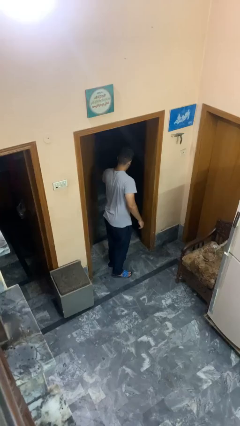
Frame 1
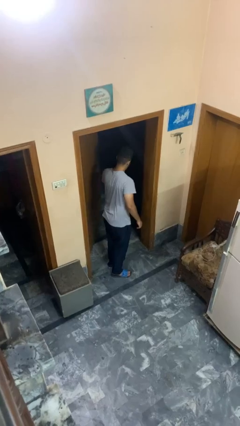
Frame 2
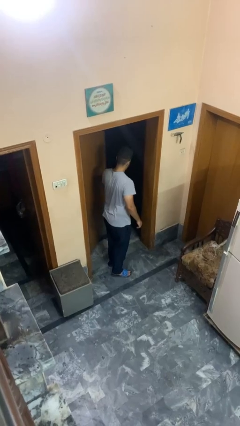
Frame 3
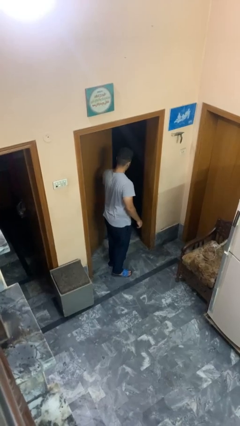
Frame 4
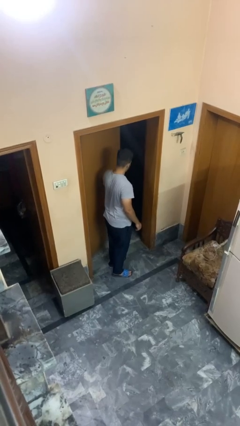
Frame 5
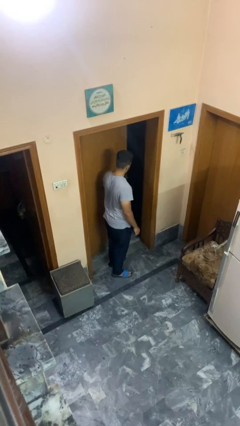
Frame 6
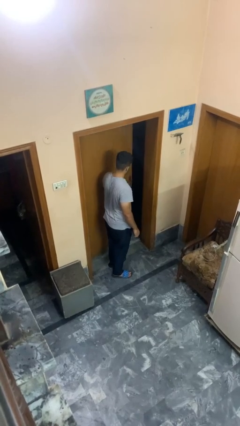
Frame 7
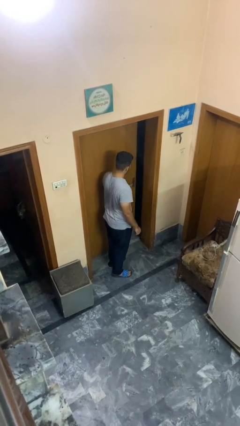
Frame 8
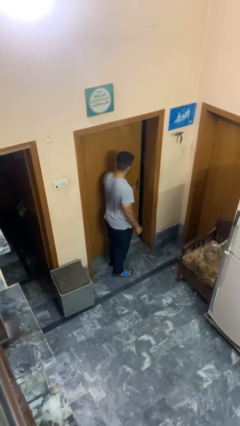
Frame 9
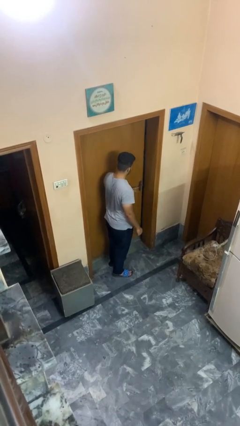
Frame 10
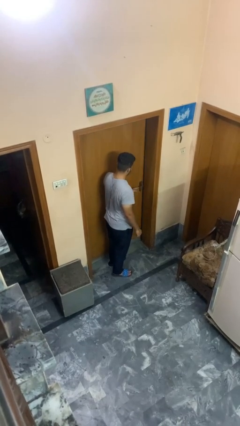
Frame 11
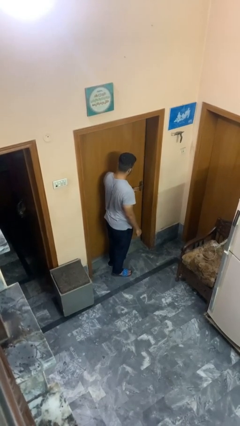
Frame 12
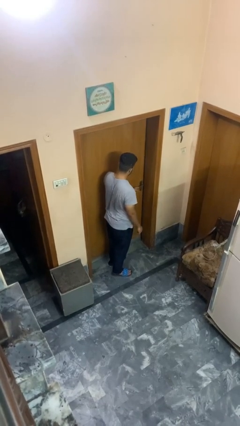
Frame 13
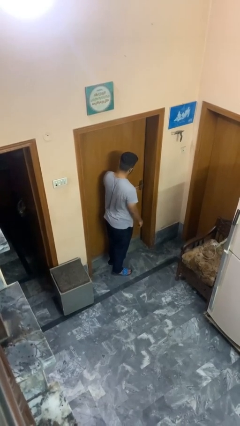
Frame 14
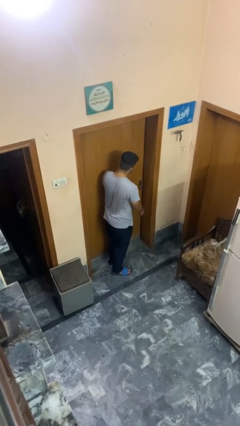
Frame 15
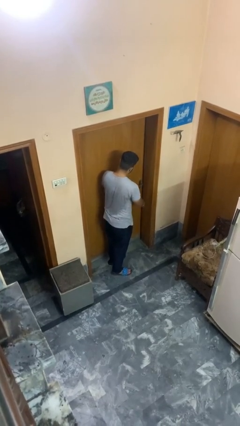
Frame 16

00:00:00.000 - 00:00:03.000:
person closes facility door

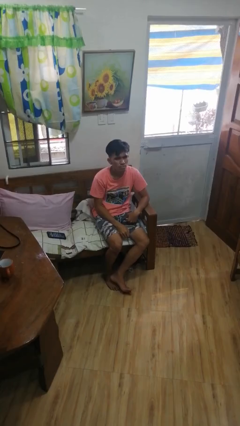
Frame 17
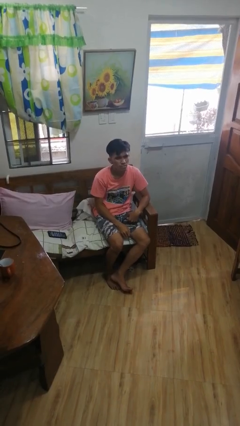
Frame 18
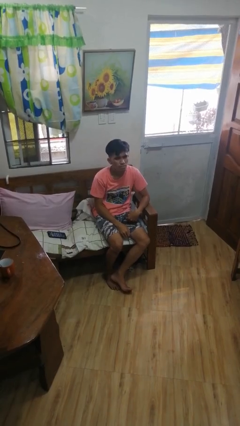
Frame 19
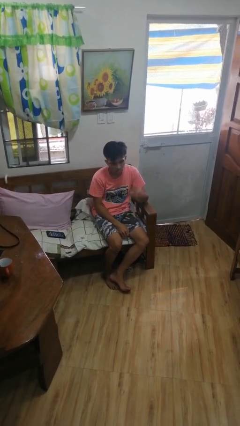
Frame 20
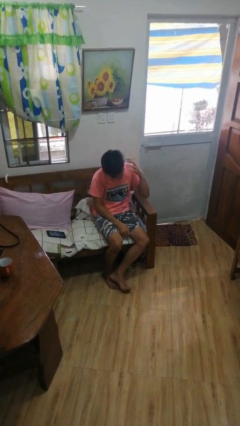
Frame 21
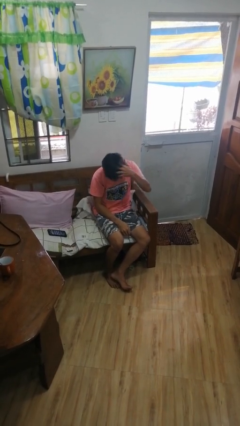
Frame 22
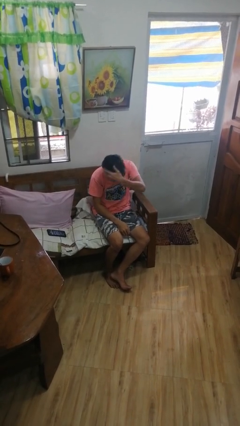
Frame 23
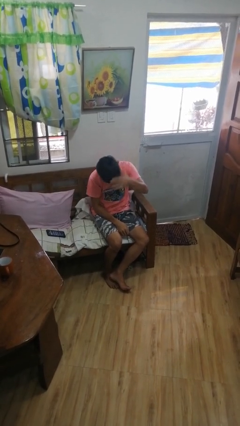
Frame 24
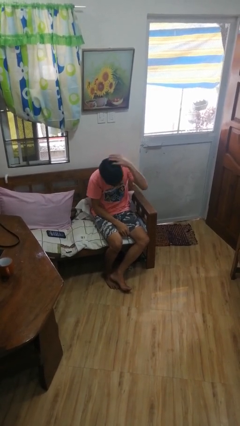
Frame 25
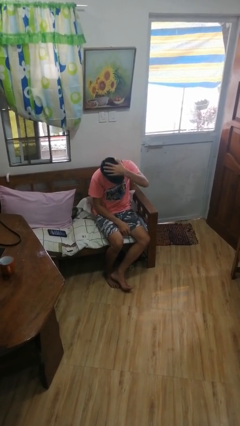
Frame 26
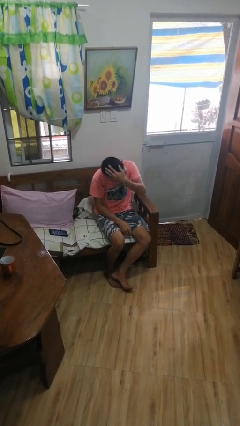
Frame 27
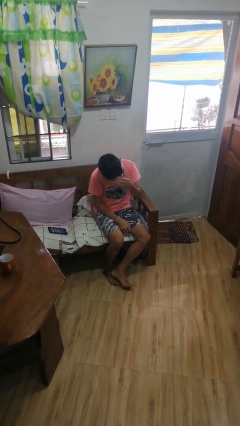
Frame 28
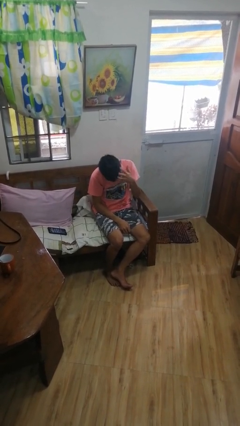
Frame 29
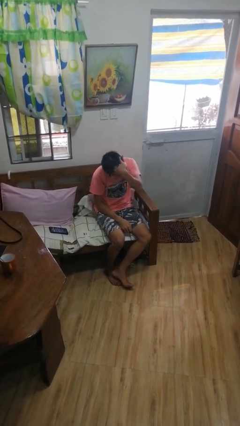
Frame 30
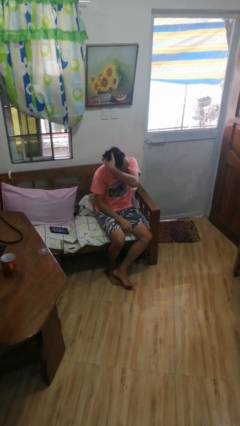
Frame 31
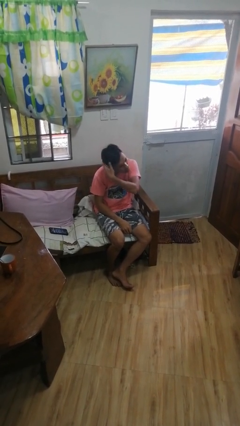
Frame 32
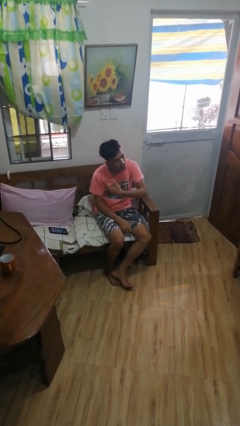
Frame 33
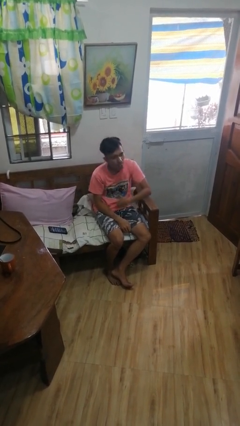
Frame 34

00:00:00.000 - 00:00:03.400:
person strokes hair

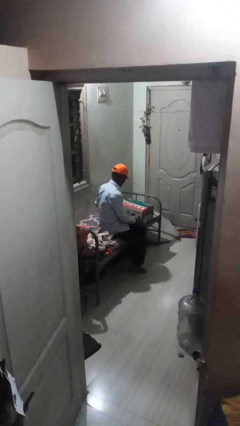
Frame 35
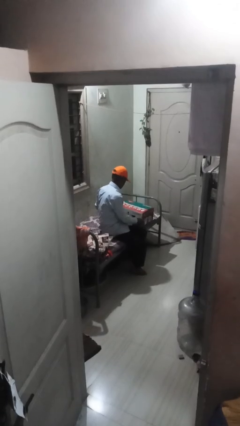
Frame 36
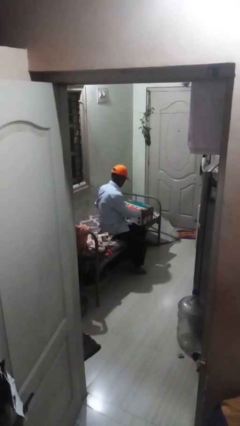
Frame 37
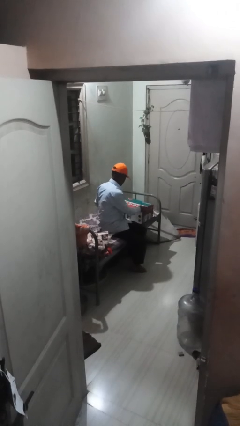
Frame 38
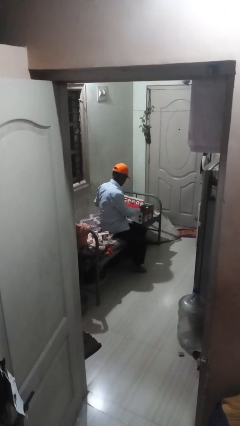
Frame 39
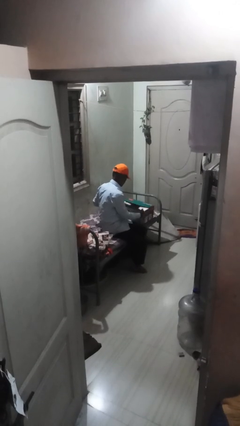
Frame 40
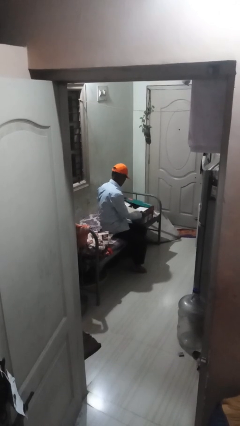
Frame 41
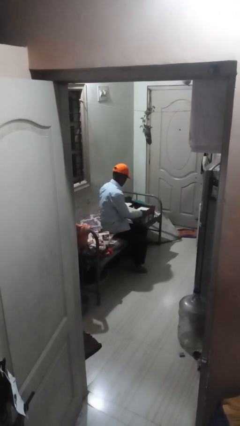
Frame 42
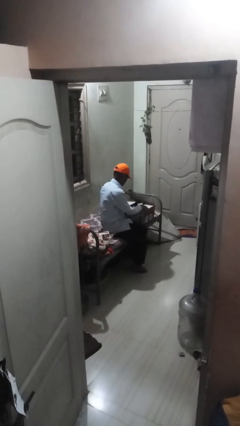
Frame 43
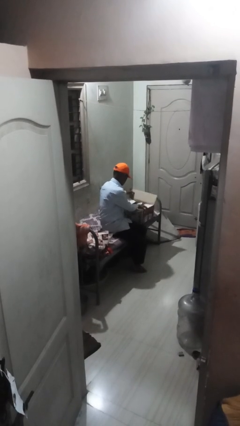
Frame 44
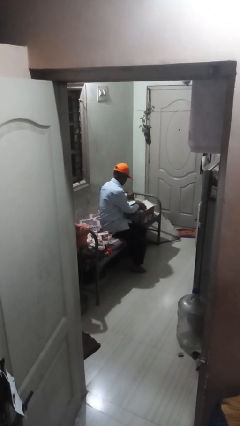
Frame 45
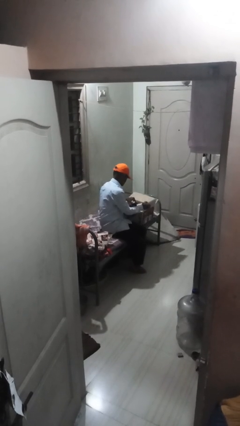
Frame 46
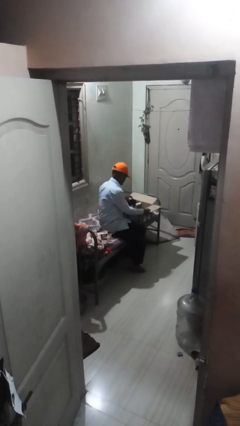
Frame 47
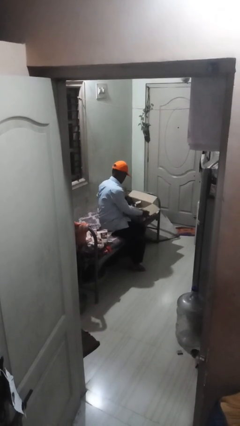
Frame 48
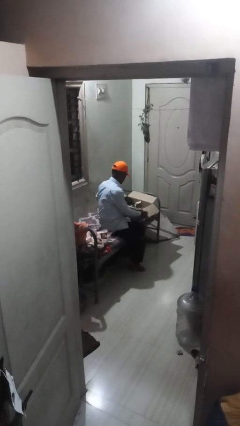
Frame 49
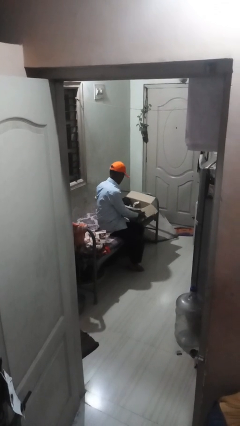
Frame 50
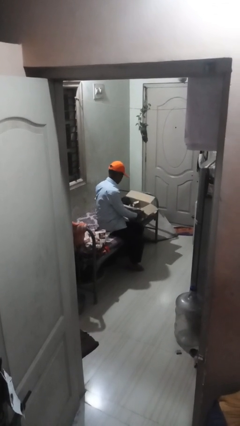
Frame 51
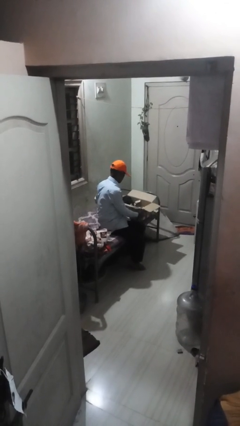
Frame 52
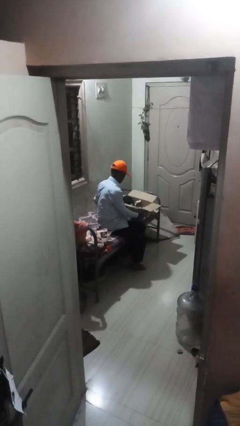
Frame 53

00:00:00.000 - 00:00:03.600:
person opens box

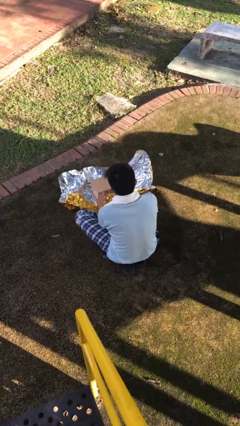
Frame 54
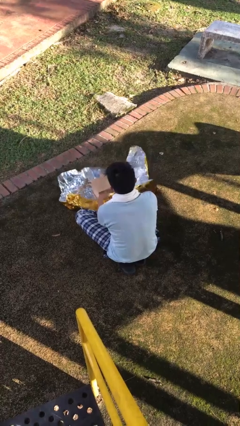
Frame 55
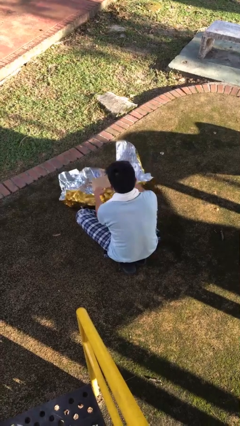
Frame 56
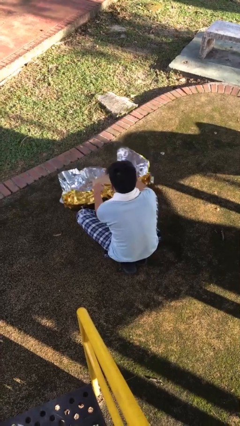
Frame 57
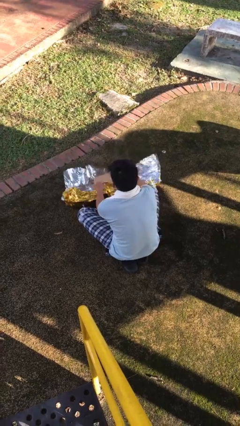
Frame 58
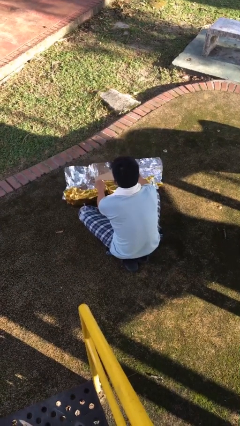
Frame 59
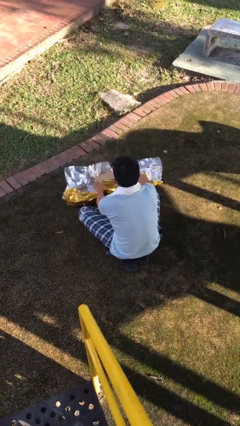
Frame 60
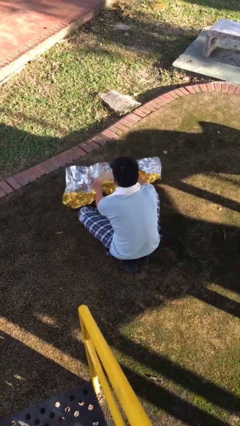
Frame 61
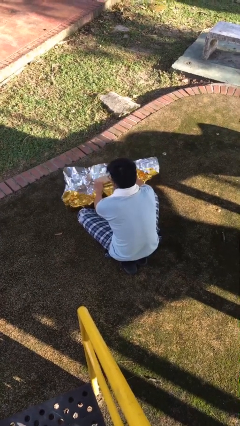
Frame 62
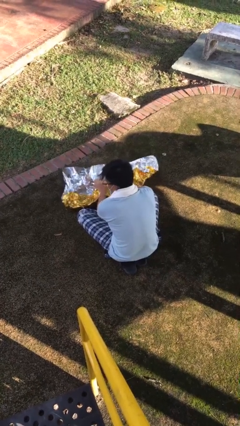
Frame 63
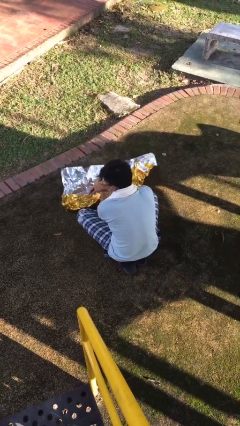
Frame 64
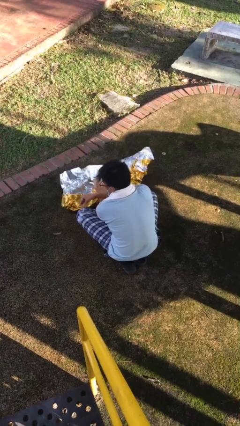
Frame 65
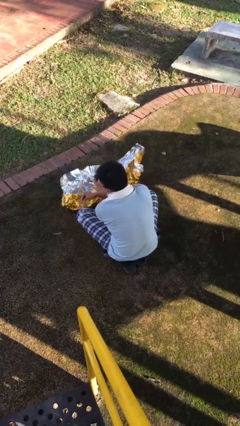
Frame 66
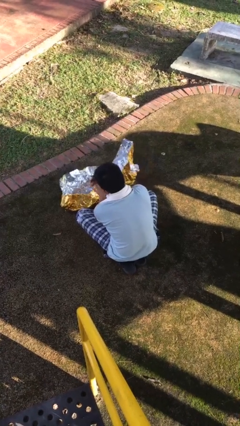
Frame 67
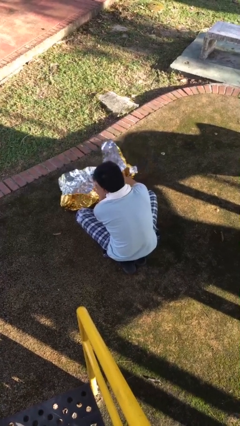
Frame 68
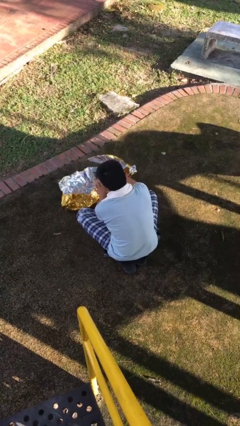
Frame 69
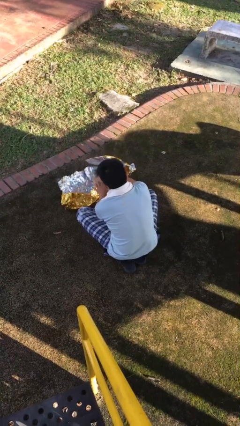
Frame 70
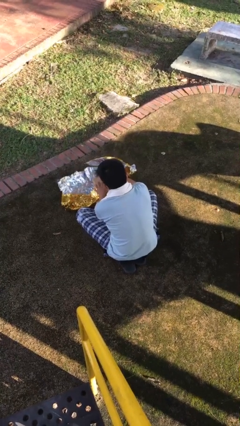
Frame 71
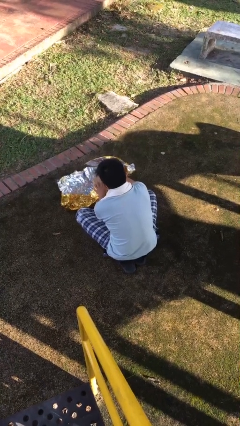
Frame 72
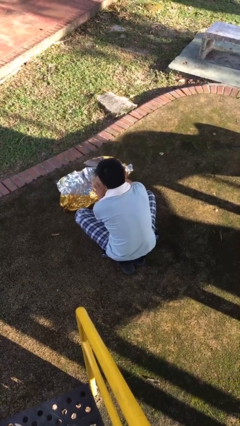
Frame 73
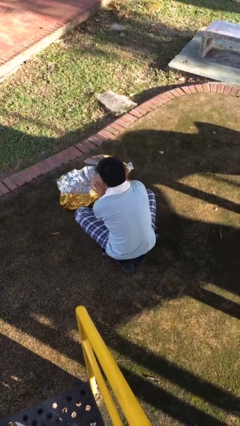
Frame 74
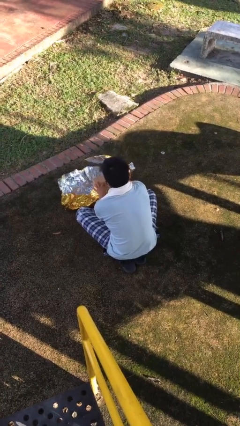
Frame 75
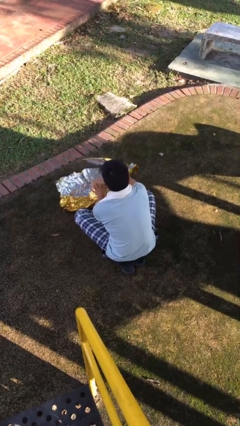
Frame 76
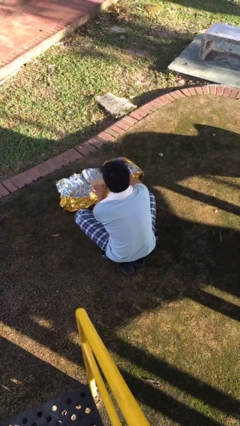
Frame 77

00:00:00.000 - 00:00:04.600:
person wraps box

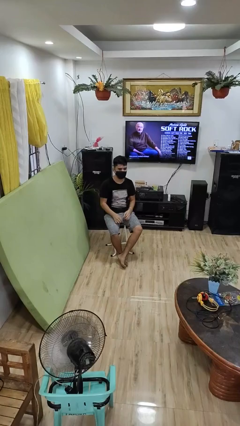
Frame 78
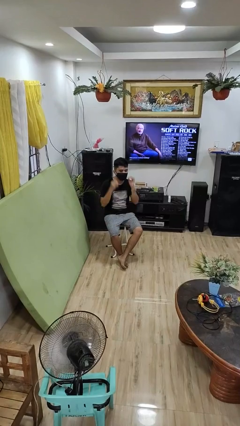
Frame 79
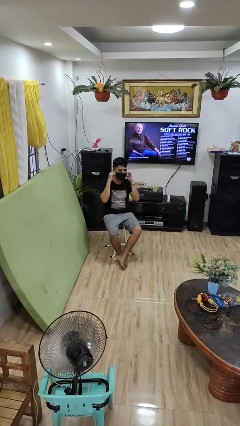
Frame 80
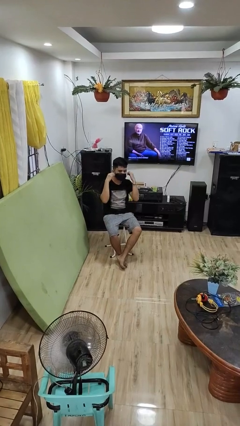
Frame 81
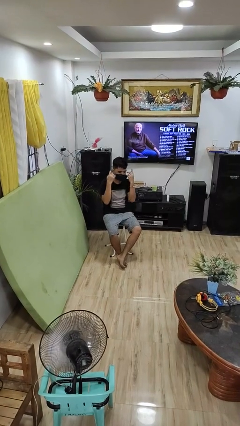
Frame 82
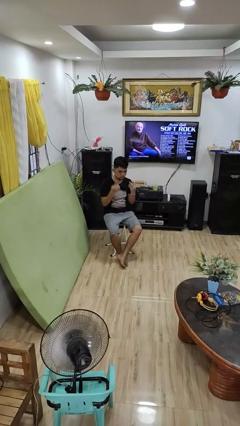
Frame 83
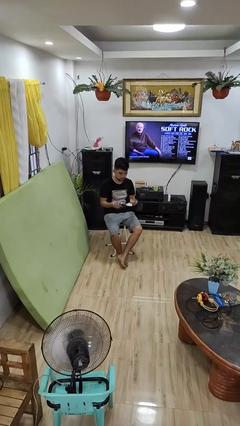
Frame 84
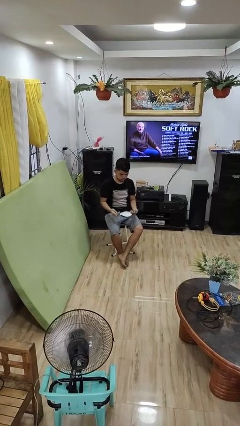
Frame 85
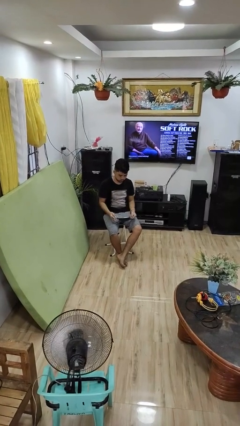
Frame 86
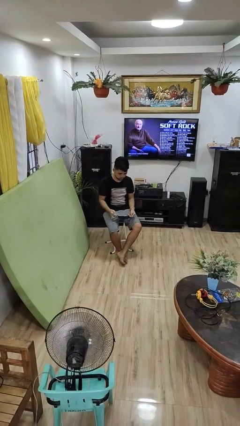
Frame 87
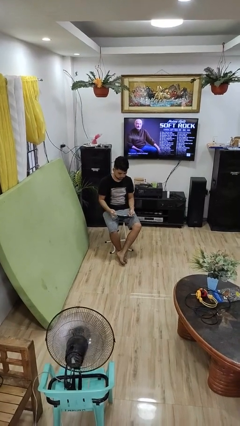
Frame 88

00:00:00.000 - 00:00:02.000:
person takes off facemask

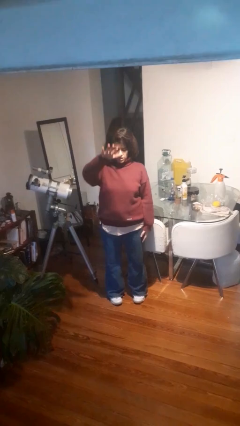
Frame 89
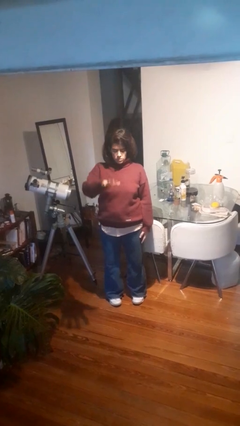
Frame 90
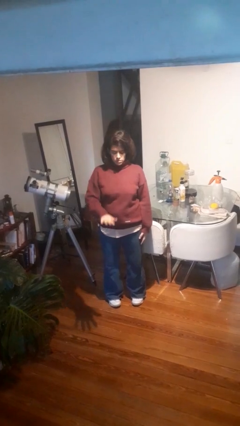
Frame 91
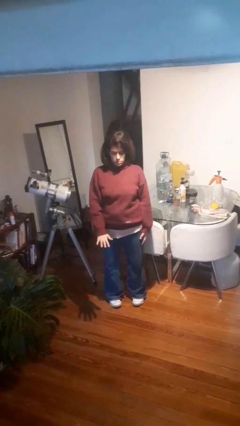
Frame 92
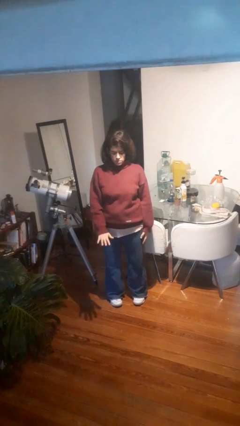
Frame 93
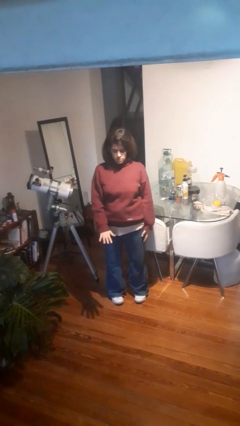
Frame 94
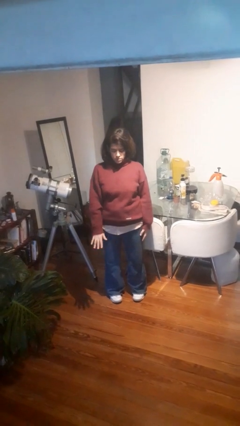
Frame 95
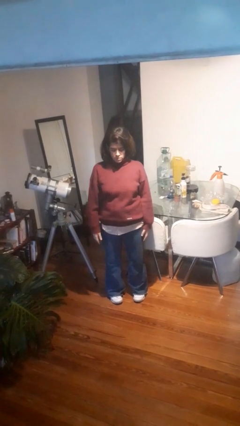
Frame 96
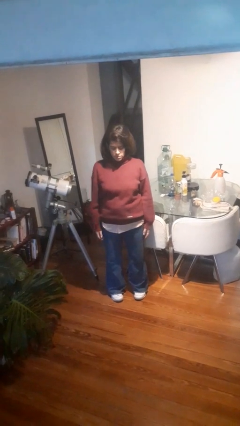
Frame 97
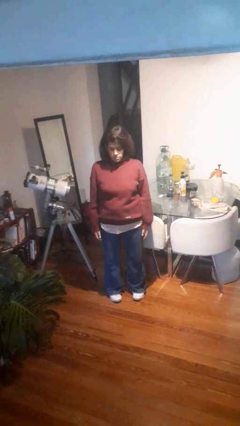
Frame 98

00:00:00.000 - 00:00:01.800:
person gestures swipe down
